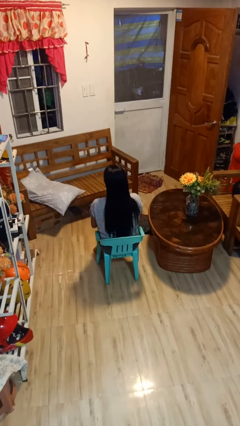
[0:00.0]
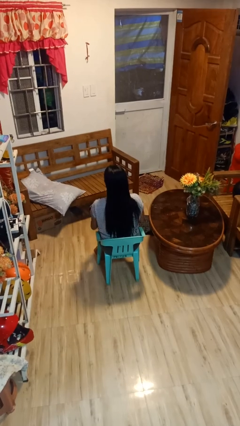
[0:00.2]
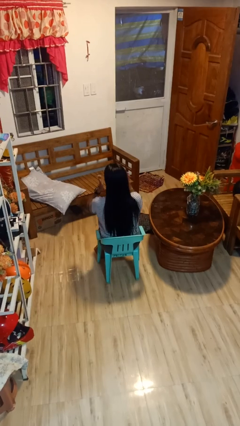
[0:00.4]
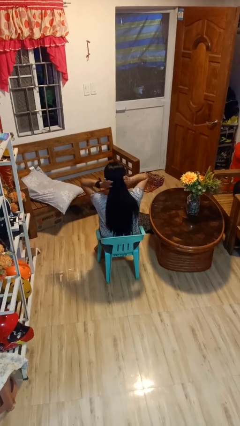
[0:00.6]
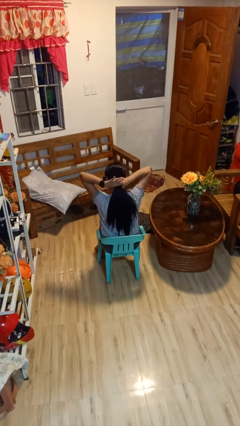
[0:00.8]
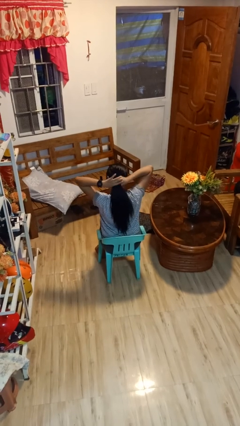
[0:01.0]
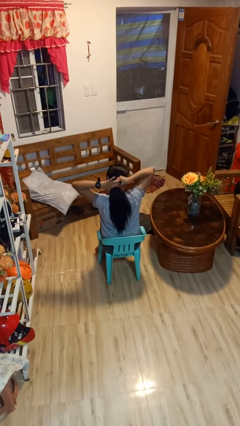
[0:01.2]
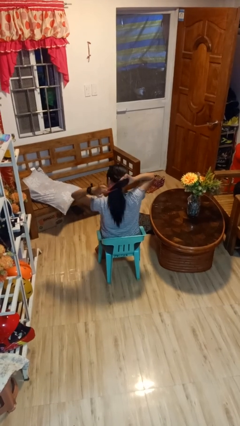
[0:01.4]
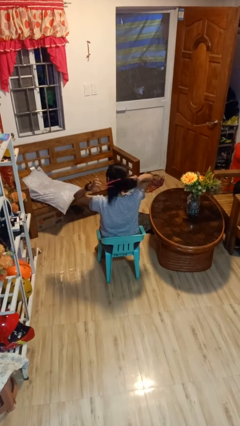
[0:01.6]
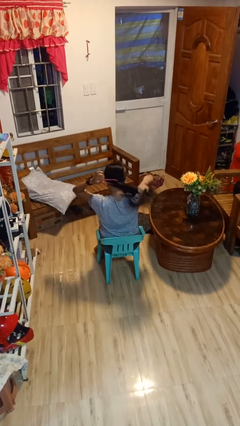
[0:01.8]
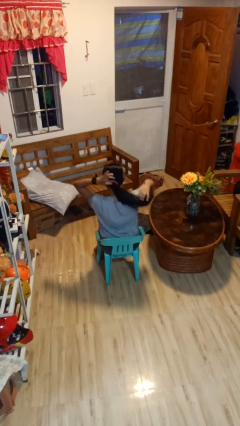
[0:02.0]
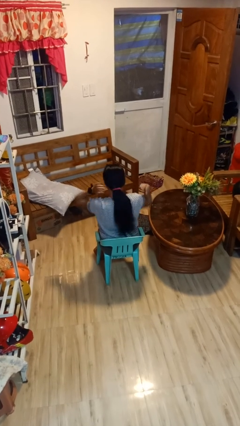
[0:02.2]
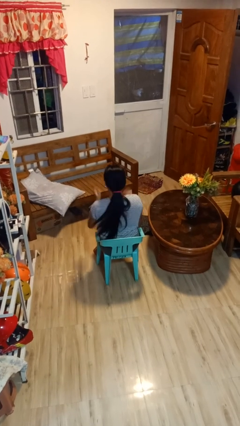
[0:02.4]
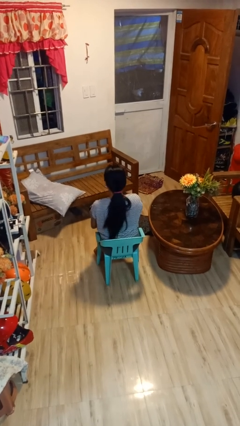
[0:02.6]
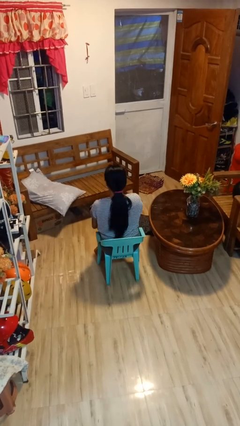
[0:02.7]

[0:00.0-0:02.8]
person puts hair in ponytail

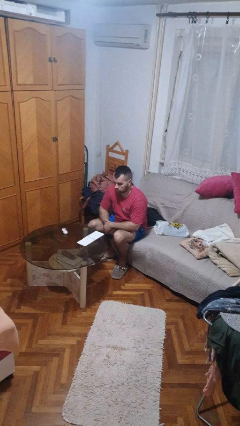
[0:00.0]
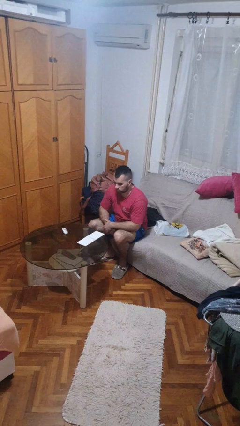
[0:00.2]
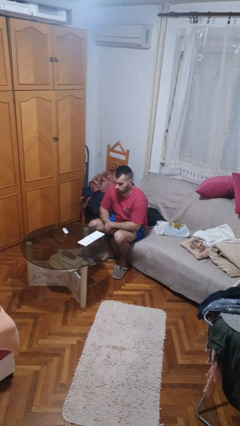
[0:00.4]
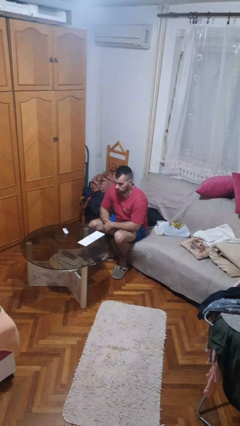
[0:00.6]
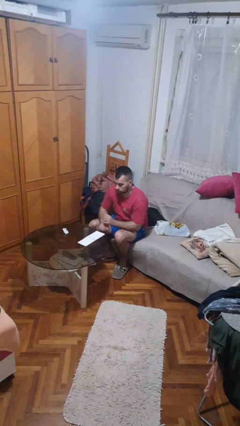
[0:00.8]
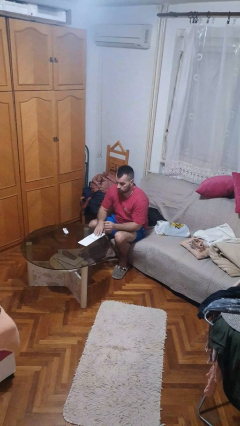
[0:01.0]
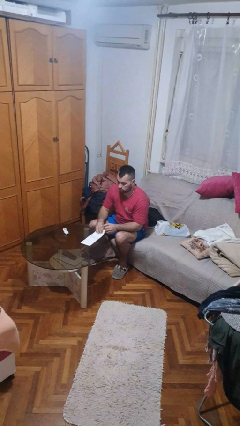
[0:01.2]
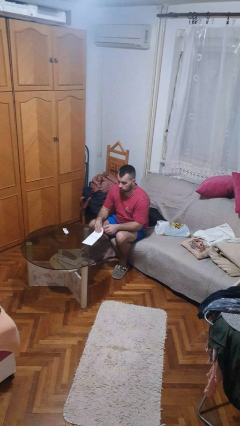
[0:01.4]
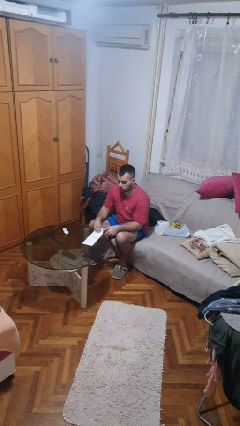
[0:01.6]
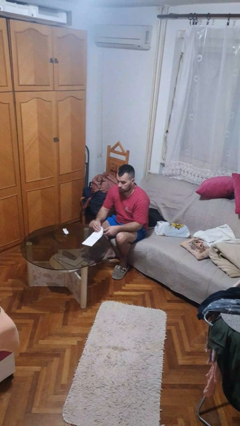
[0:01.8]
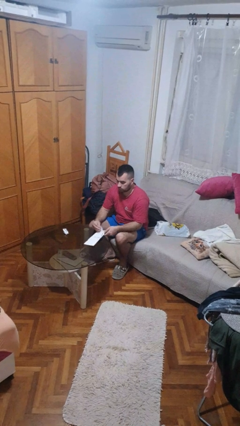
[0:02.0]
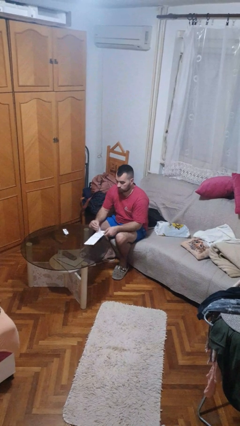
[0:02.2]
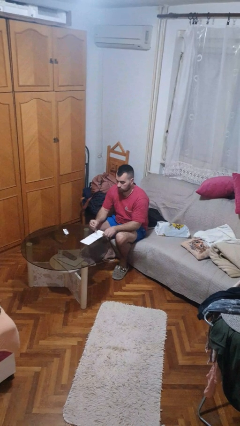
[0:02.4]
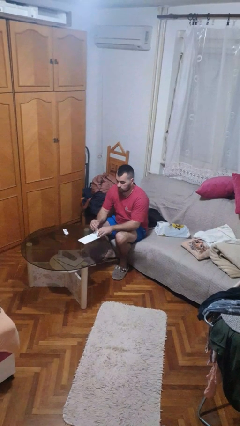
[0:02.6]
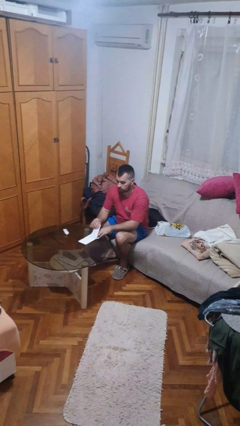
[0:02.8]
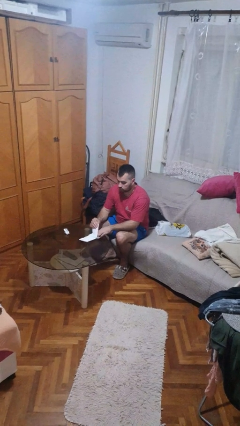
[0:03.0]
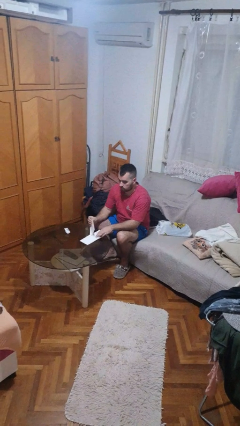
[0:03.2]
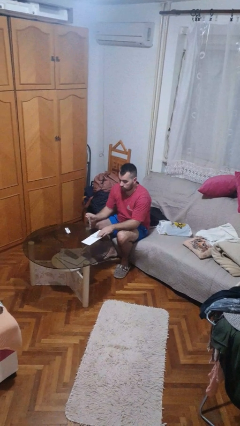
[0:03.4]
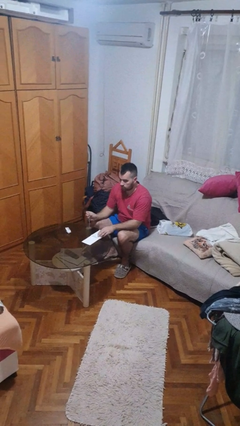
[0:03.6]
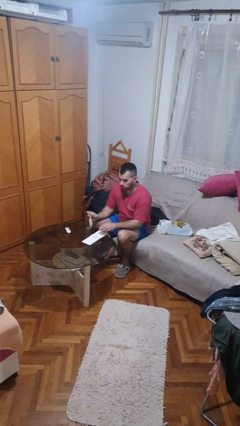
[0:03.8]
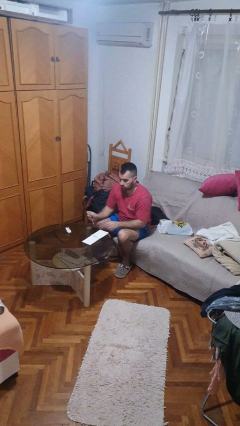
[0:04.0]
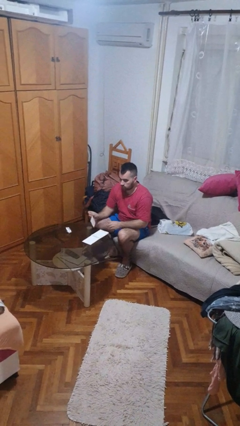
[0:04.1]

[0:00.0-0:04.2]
person tears paper

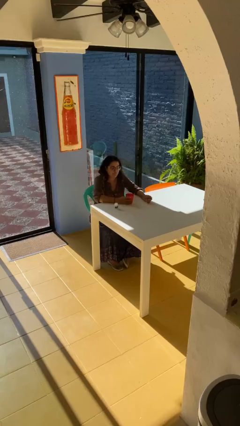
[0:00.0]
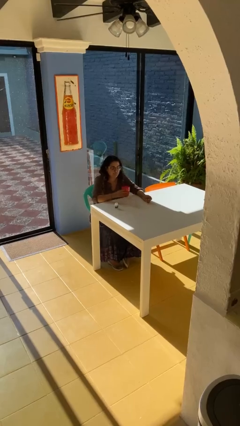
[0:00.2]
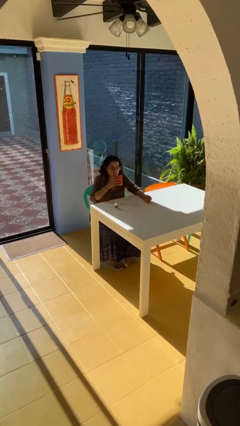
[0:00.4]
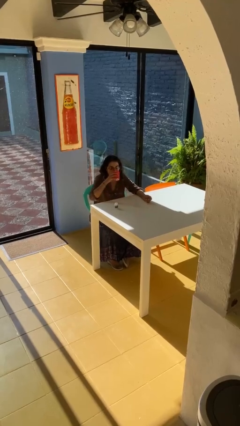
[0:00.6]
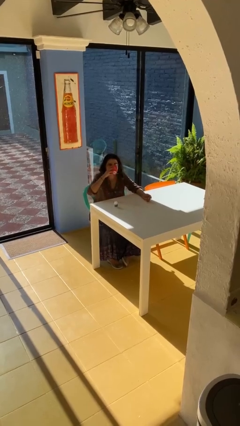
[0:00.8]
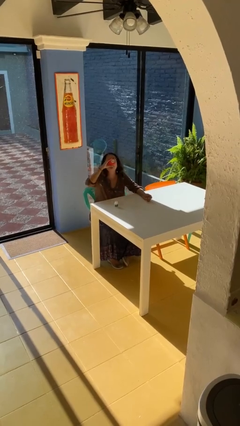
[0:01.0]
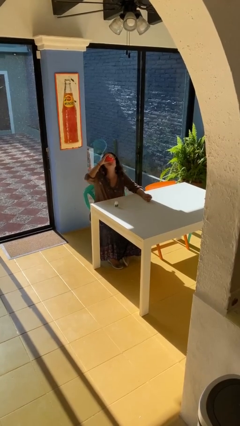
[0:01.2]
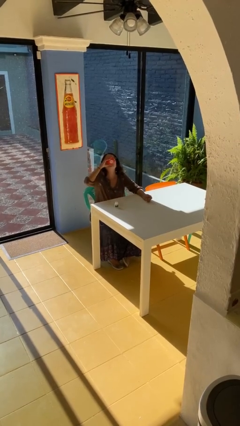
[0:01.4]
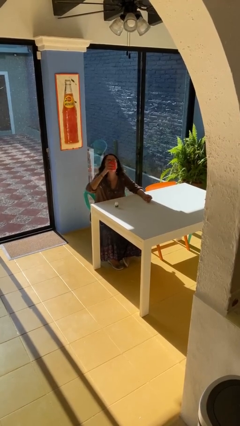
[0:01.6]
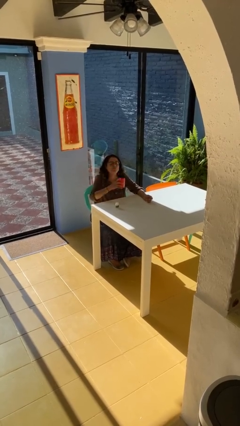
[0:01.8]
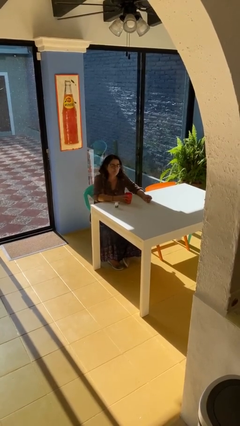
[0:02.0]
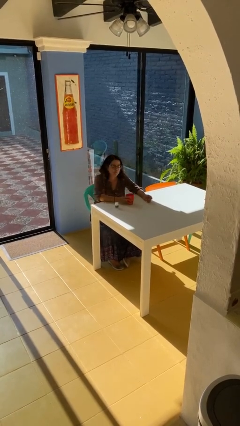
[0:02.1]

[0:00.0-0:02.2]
person drinks from cup

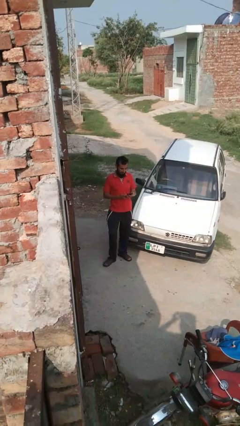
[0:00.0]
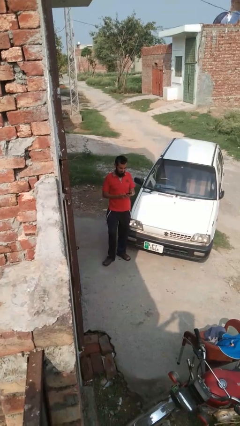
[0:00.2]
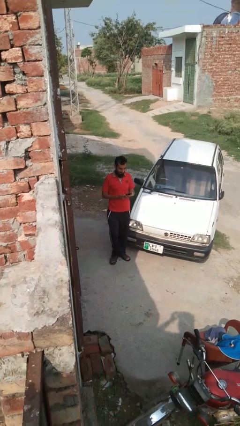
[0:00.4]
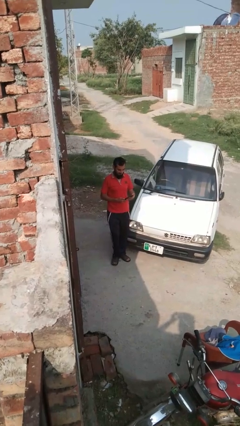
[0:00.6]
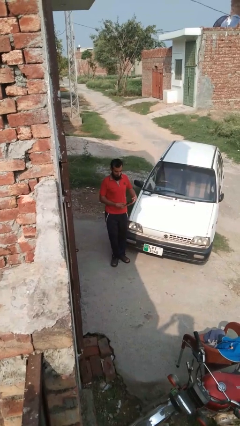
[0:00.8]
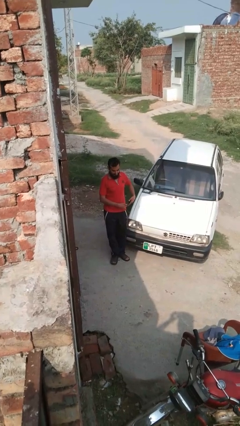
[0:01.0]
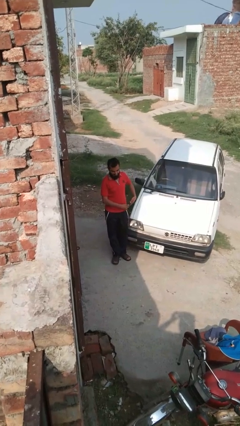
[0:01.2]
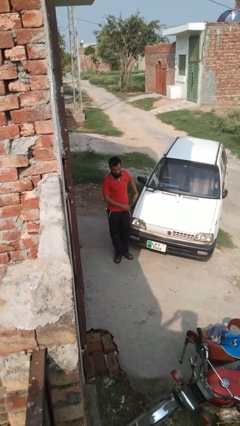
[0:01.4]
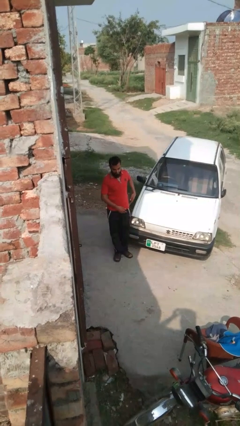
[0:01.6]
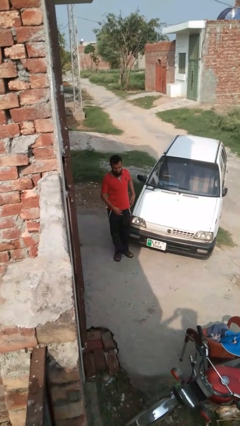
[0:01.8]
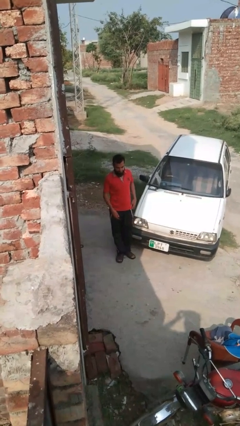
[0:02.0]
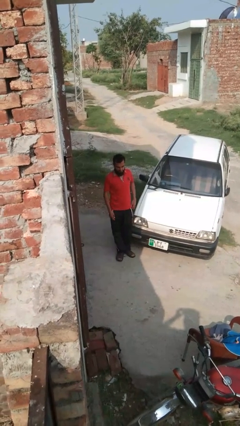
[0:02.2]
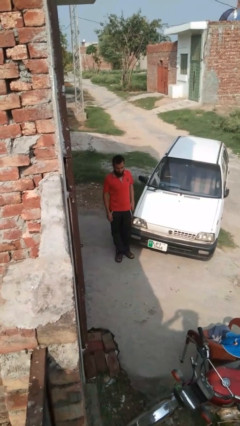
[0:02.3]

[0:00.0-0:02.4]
person puts phone into pocket

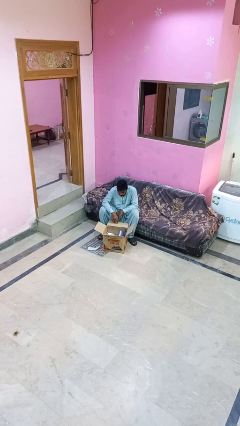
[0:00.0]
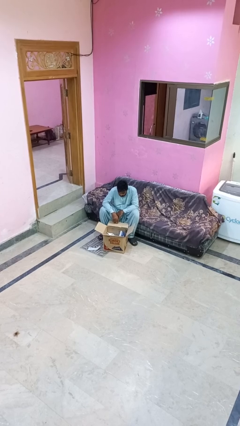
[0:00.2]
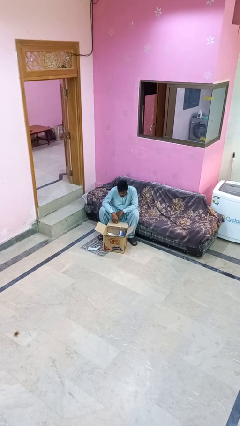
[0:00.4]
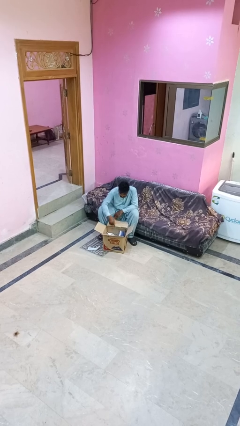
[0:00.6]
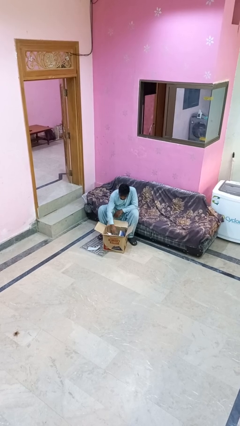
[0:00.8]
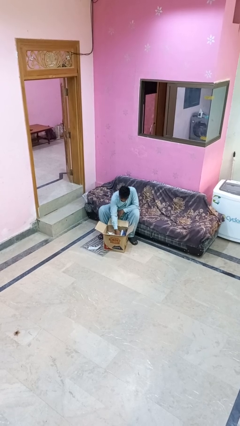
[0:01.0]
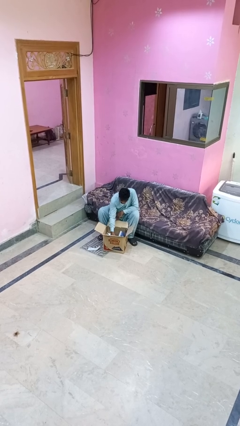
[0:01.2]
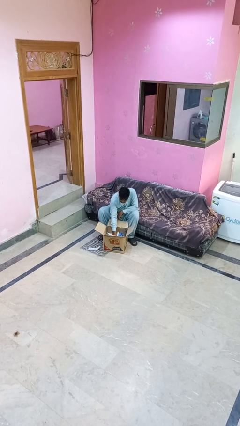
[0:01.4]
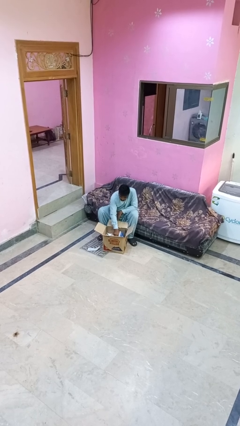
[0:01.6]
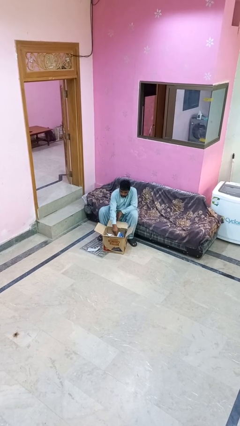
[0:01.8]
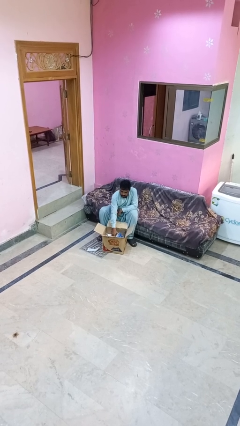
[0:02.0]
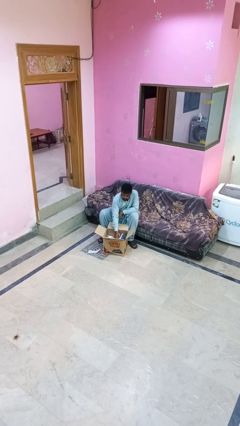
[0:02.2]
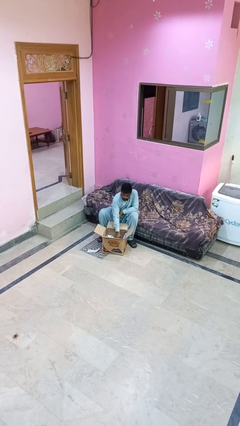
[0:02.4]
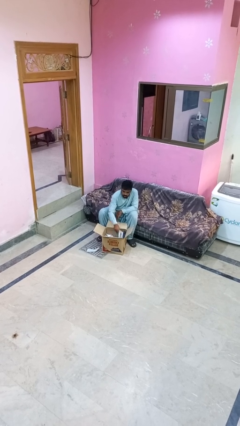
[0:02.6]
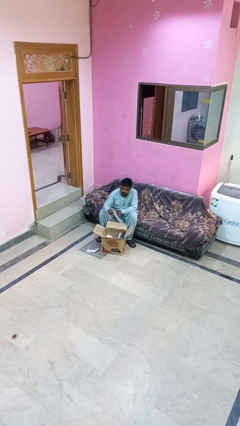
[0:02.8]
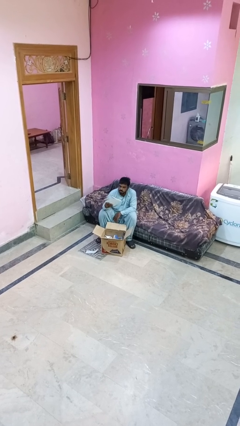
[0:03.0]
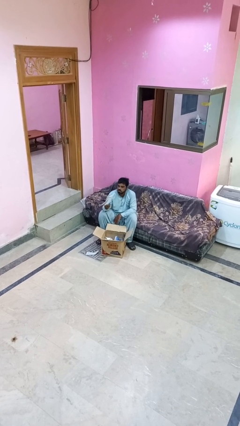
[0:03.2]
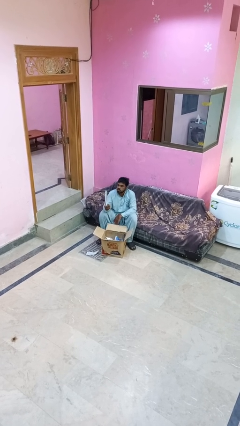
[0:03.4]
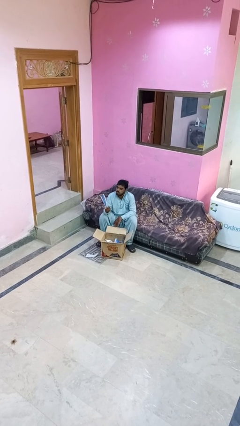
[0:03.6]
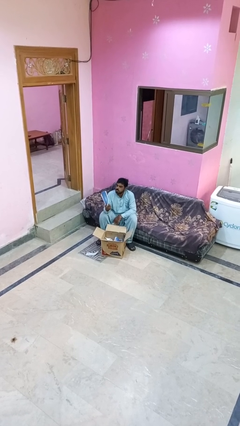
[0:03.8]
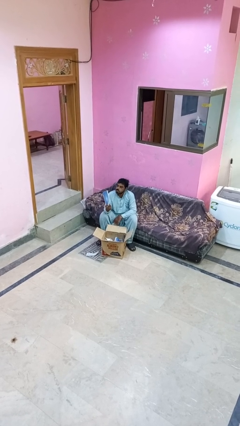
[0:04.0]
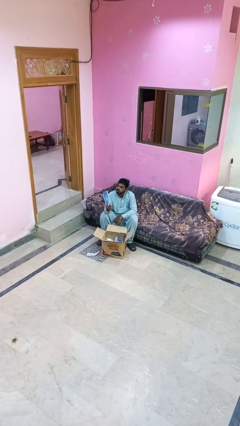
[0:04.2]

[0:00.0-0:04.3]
person takes object from box

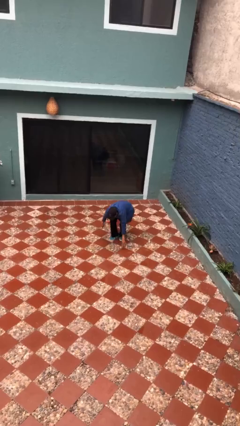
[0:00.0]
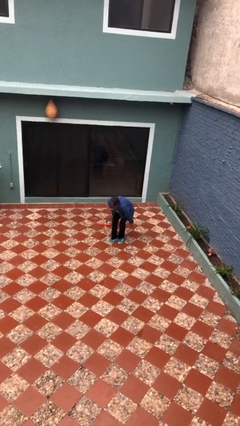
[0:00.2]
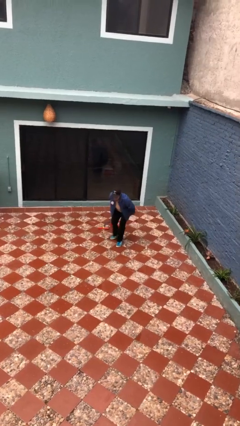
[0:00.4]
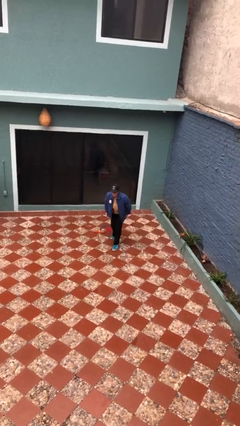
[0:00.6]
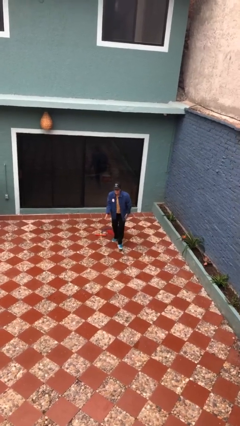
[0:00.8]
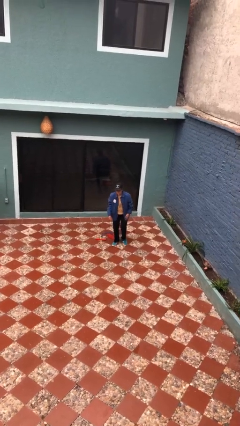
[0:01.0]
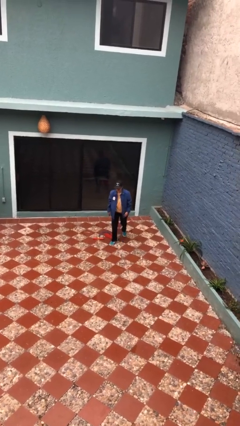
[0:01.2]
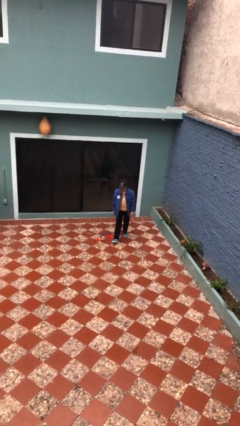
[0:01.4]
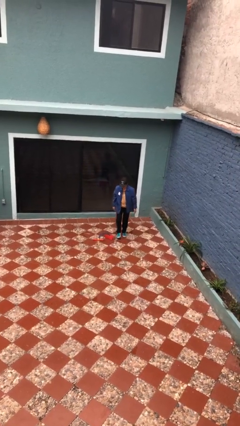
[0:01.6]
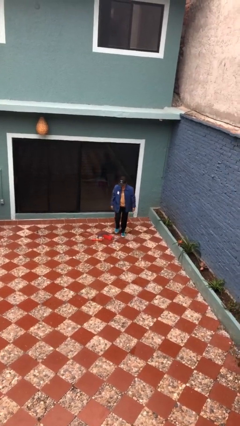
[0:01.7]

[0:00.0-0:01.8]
person stands up from floor
